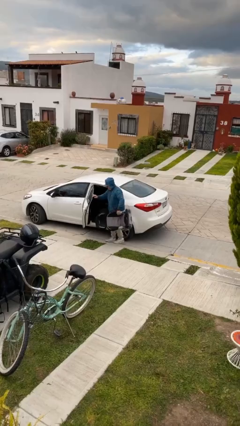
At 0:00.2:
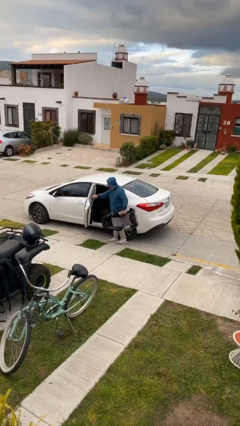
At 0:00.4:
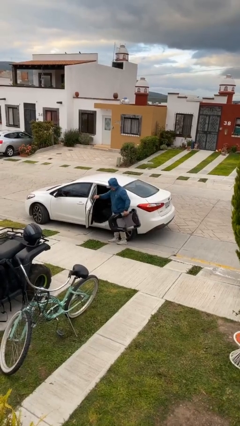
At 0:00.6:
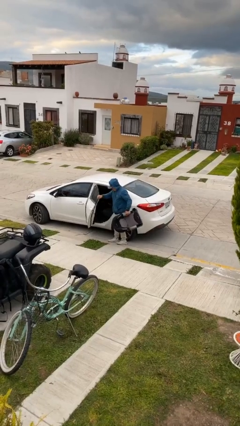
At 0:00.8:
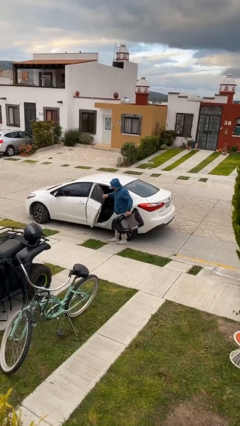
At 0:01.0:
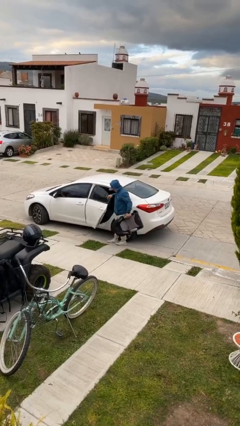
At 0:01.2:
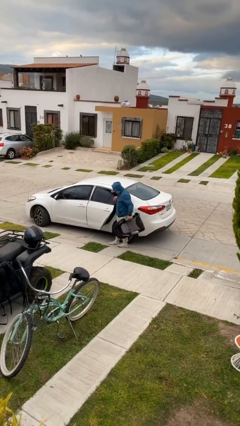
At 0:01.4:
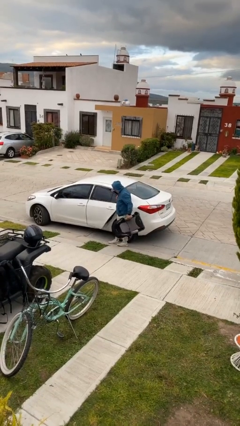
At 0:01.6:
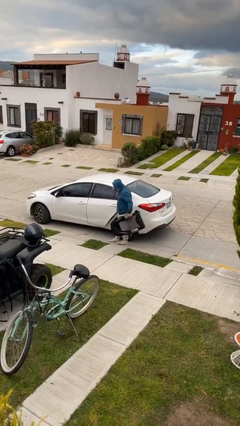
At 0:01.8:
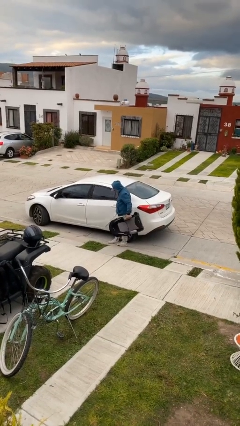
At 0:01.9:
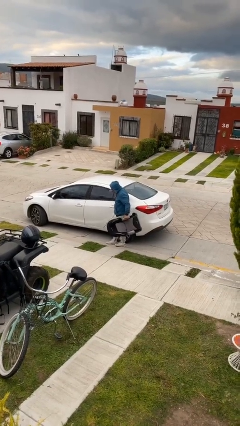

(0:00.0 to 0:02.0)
person closes car door

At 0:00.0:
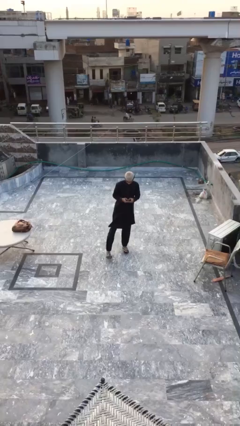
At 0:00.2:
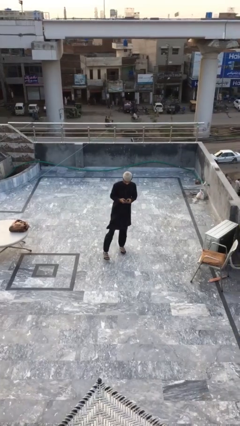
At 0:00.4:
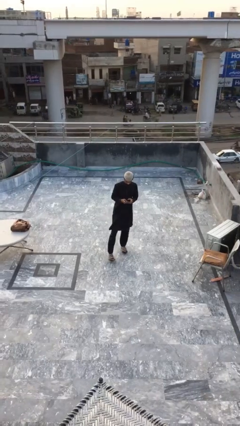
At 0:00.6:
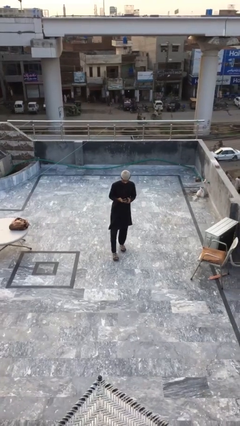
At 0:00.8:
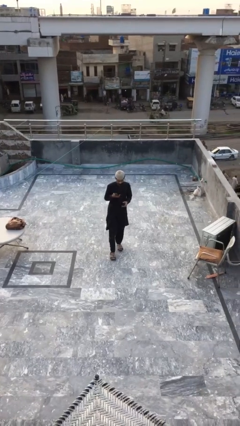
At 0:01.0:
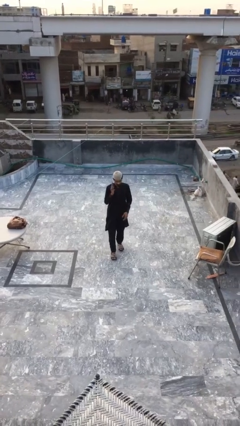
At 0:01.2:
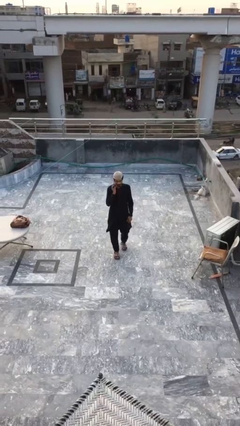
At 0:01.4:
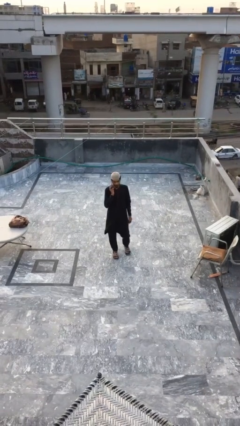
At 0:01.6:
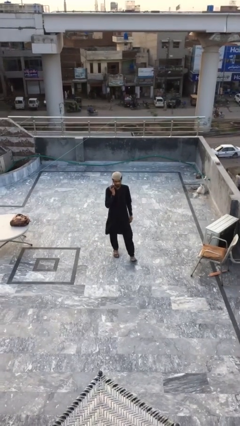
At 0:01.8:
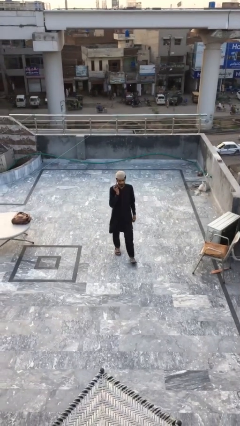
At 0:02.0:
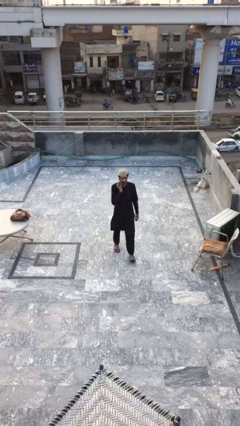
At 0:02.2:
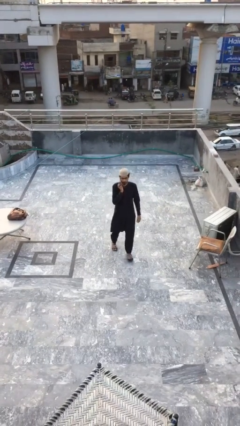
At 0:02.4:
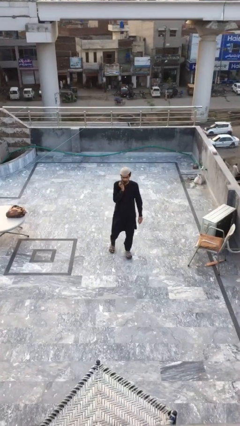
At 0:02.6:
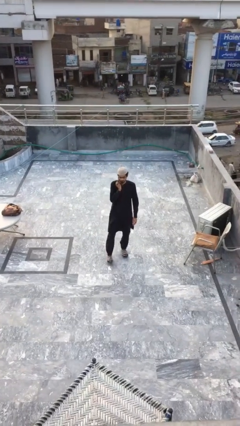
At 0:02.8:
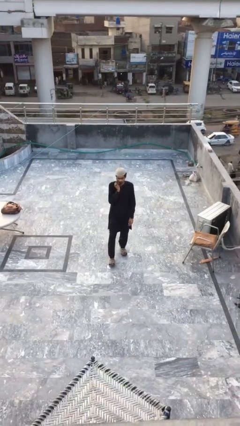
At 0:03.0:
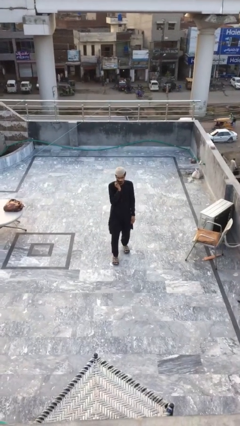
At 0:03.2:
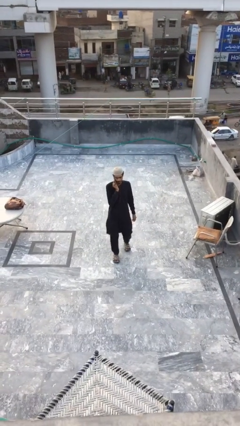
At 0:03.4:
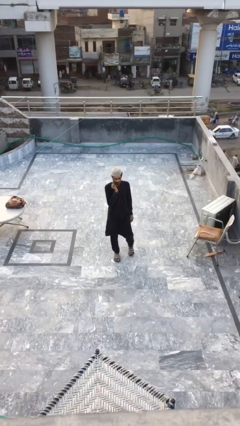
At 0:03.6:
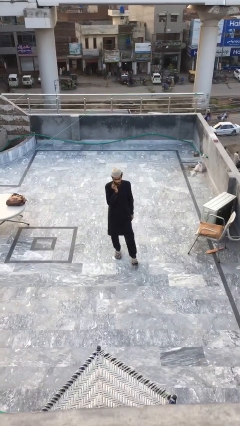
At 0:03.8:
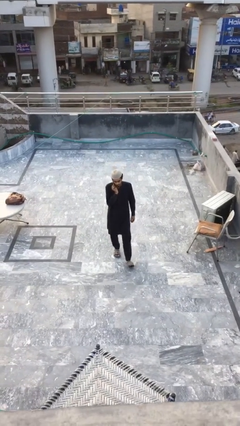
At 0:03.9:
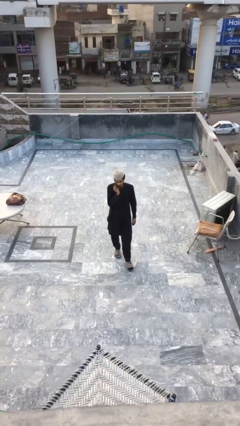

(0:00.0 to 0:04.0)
person talks on phone

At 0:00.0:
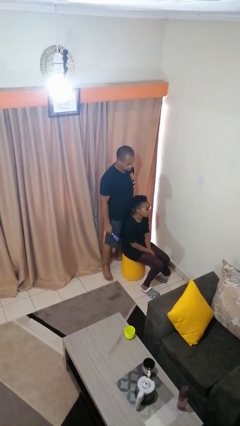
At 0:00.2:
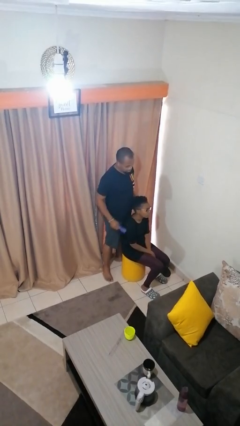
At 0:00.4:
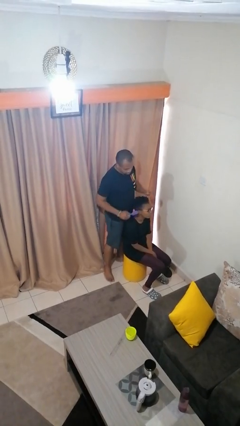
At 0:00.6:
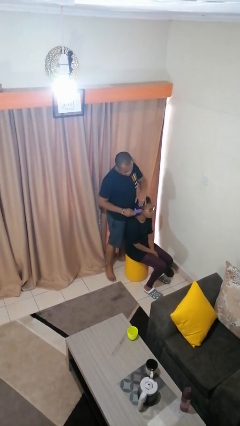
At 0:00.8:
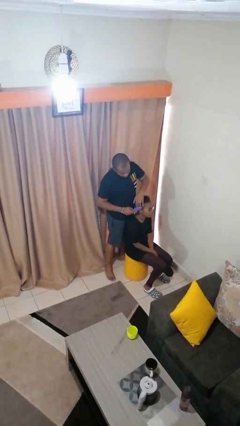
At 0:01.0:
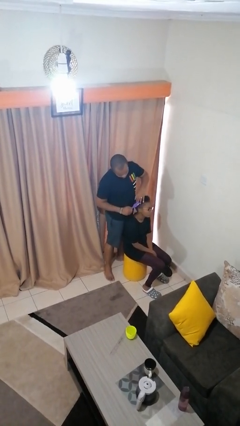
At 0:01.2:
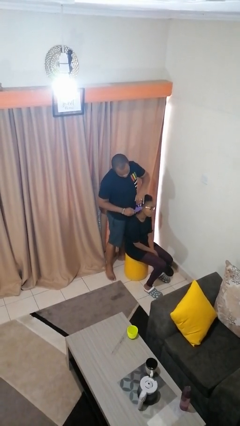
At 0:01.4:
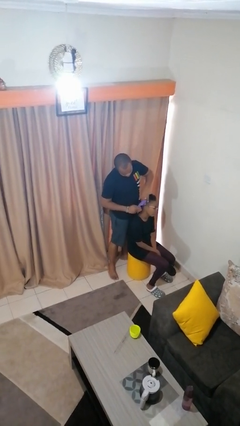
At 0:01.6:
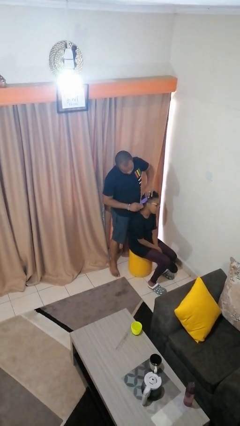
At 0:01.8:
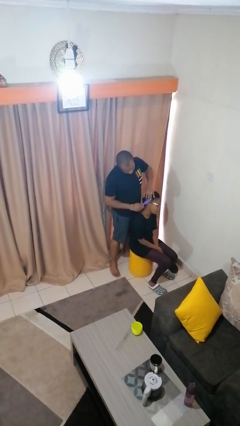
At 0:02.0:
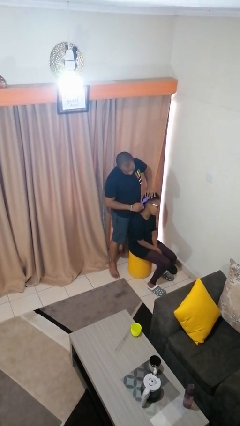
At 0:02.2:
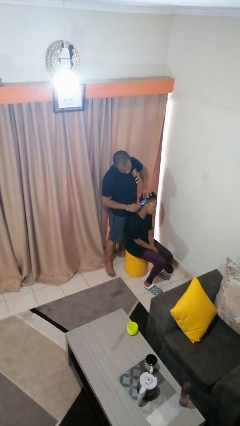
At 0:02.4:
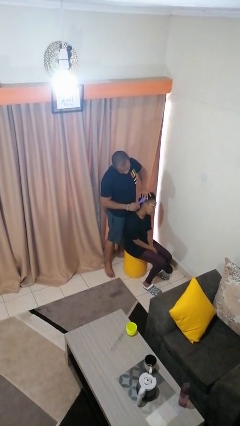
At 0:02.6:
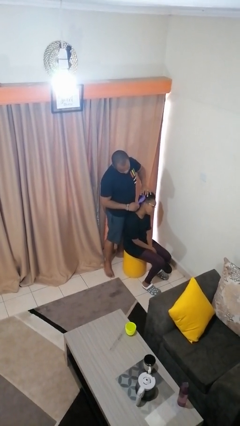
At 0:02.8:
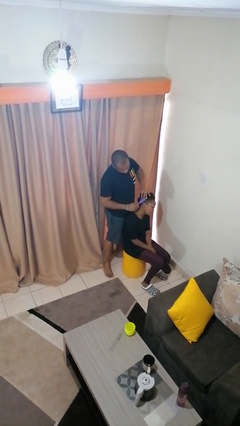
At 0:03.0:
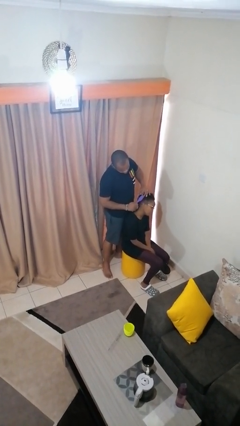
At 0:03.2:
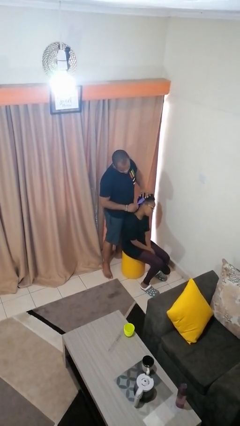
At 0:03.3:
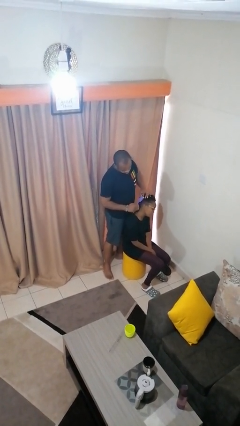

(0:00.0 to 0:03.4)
person brushes hair of person

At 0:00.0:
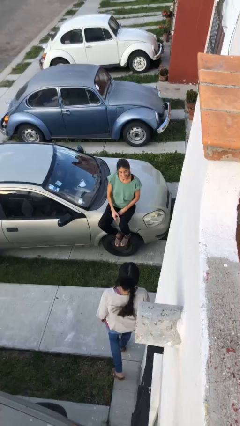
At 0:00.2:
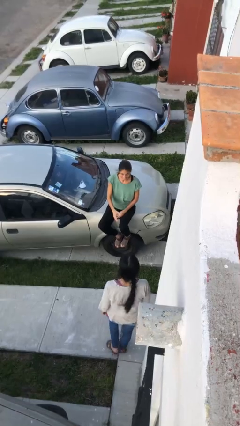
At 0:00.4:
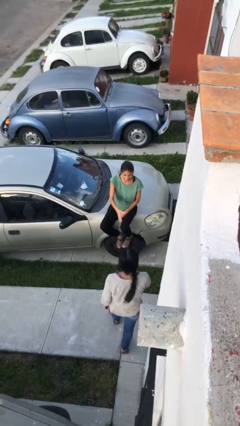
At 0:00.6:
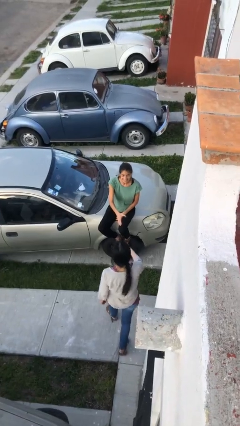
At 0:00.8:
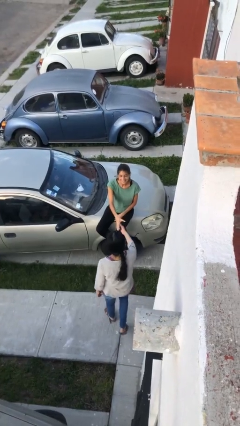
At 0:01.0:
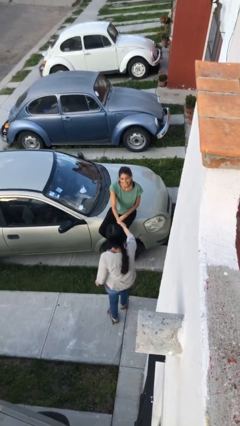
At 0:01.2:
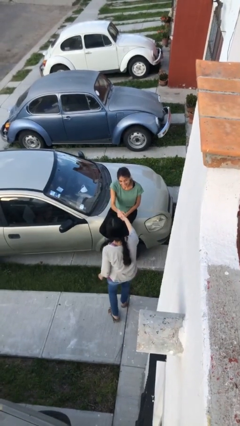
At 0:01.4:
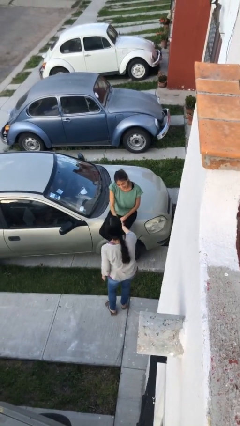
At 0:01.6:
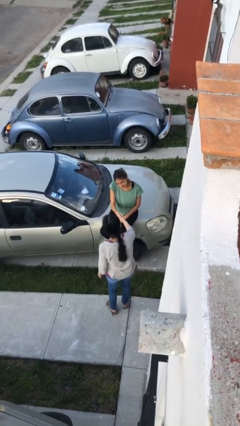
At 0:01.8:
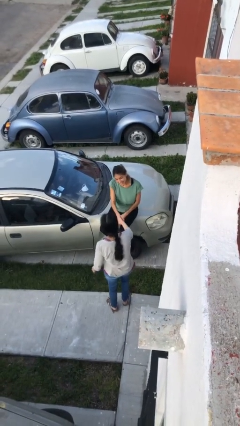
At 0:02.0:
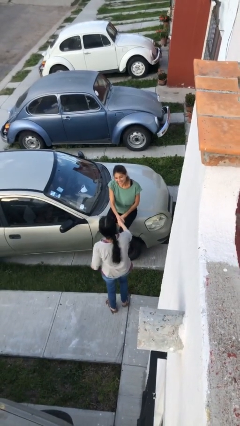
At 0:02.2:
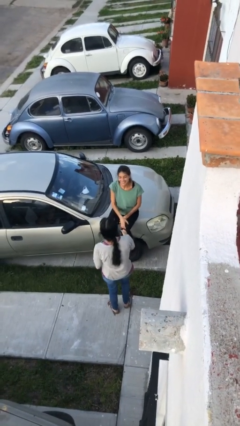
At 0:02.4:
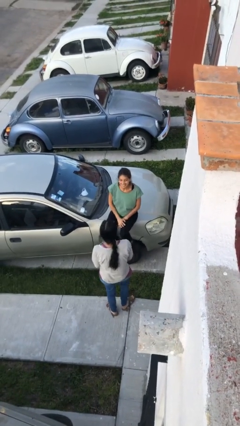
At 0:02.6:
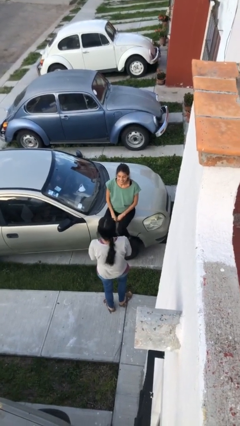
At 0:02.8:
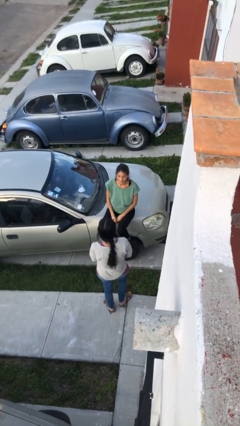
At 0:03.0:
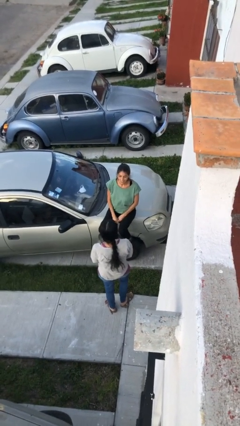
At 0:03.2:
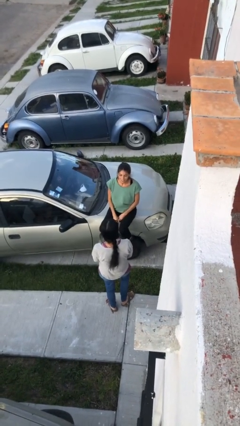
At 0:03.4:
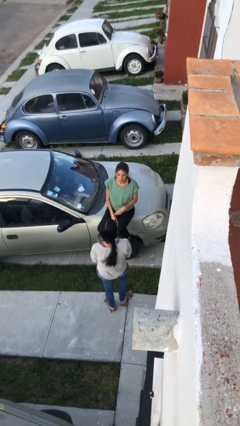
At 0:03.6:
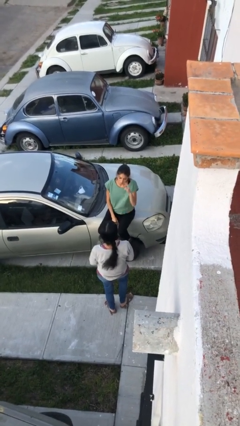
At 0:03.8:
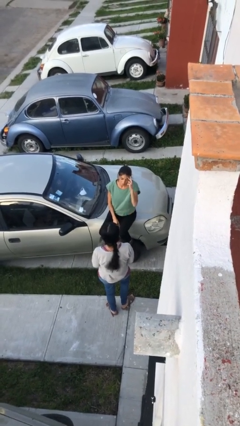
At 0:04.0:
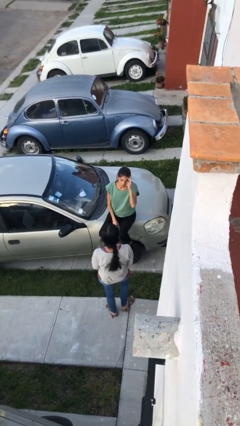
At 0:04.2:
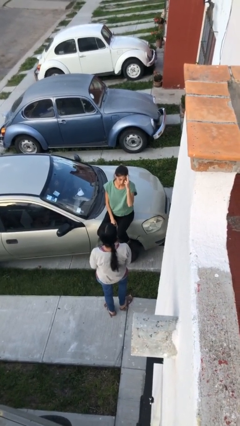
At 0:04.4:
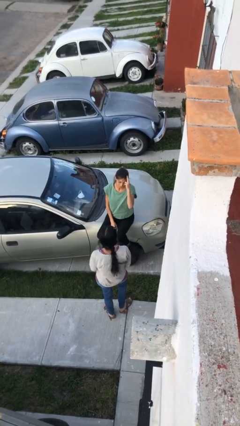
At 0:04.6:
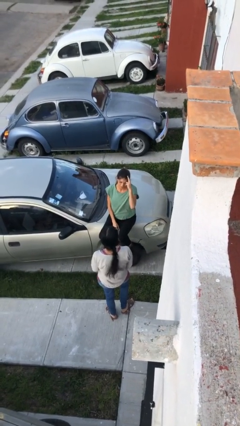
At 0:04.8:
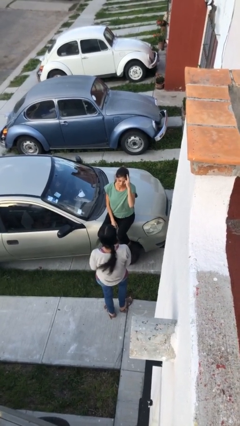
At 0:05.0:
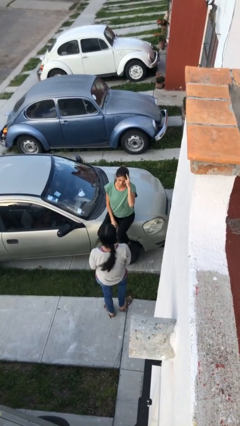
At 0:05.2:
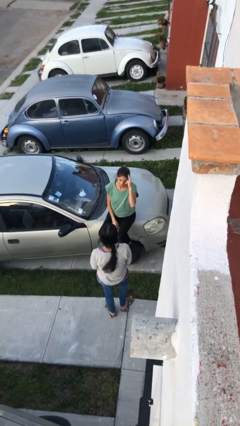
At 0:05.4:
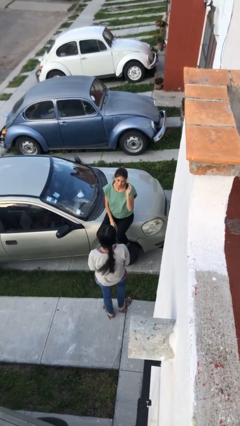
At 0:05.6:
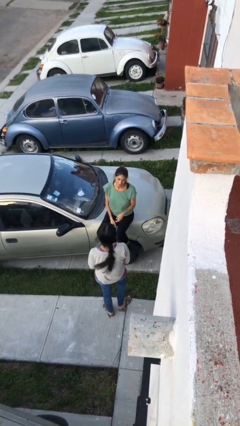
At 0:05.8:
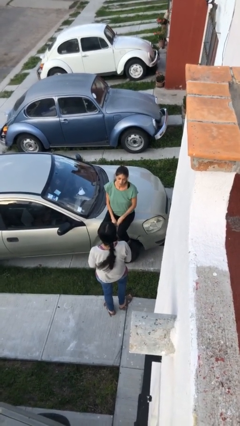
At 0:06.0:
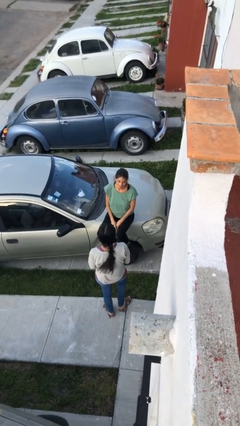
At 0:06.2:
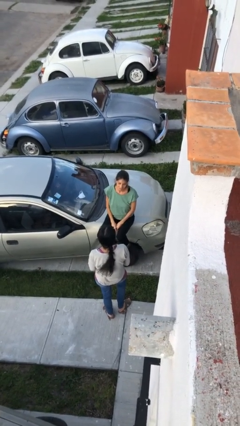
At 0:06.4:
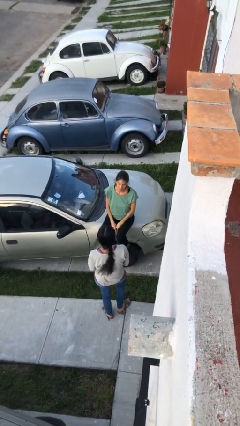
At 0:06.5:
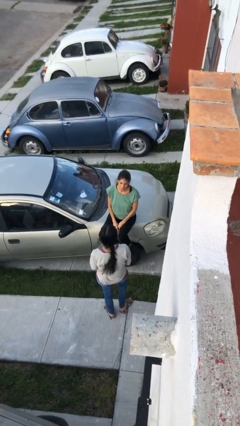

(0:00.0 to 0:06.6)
person shakes hand

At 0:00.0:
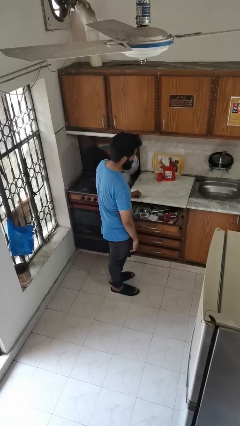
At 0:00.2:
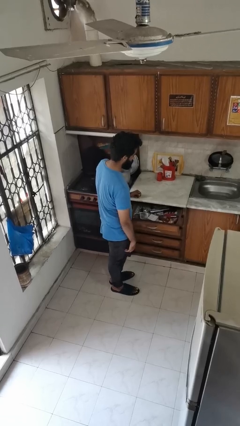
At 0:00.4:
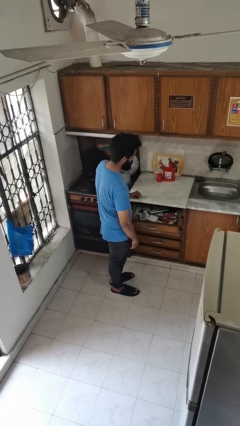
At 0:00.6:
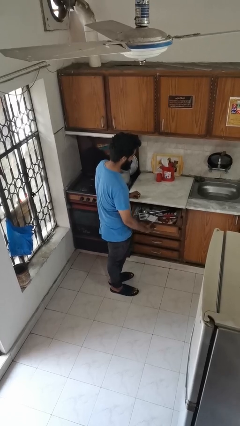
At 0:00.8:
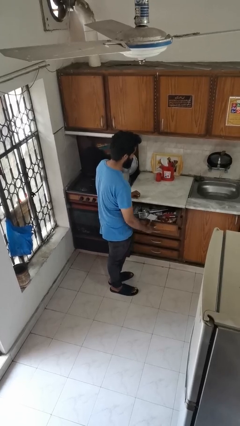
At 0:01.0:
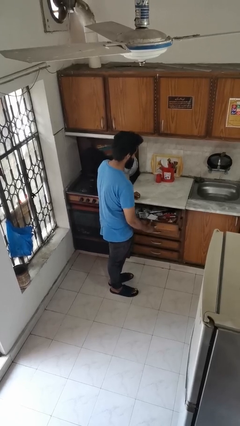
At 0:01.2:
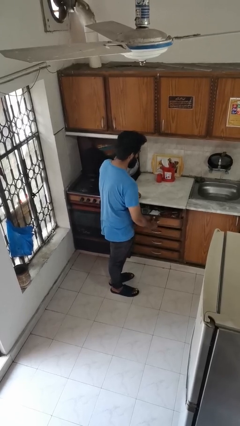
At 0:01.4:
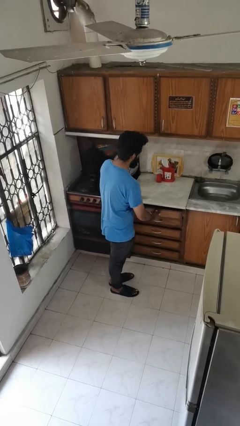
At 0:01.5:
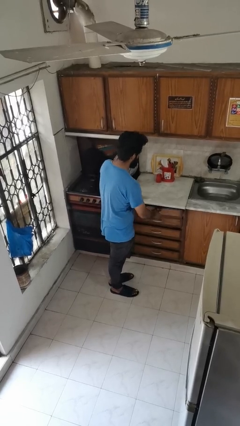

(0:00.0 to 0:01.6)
person closes kitchen drawer
